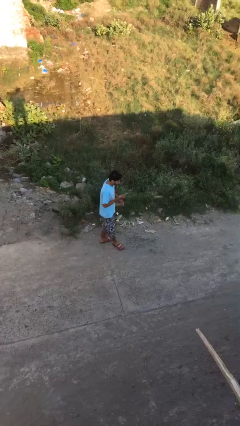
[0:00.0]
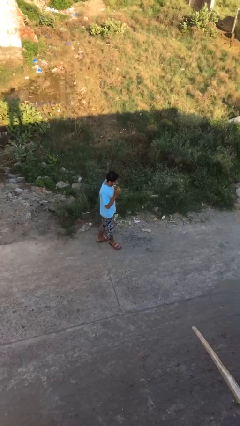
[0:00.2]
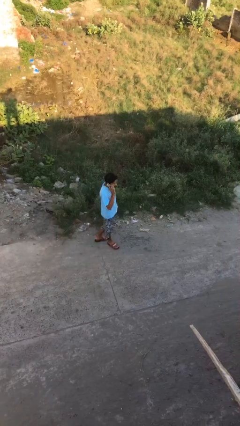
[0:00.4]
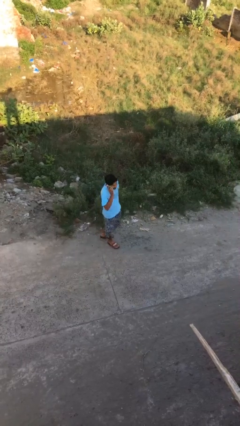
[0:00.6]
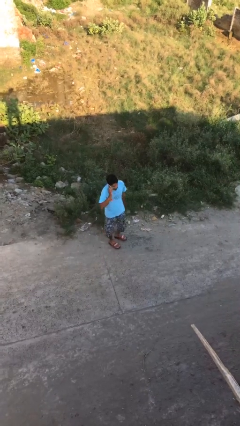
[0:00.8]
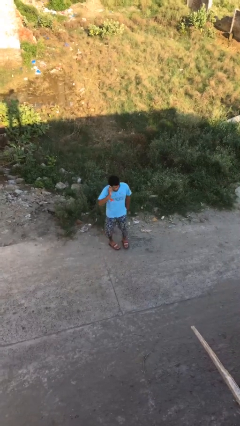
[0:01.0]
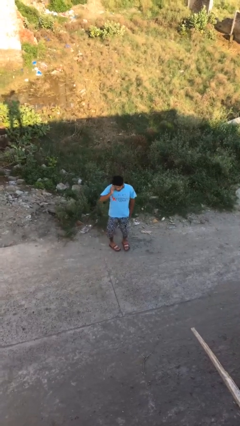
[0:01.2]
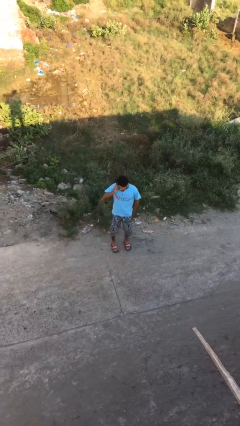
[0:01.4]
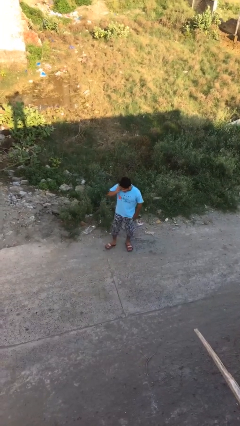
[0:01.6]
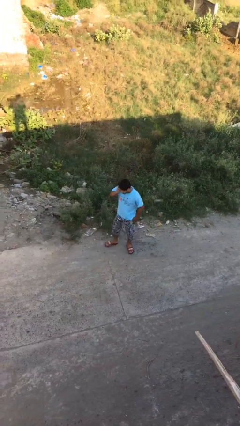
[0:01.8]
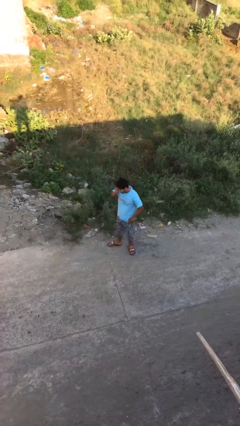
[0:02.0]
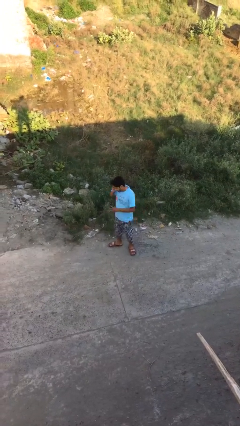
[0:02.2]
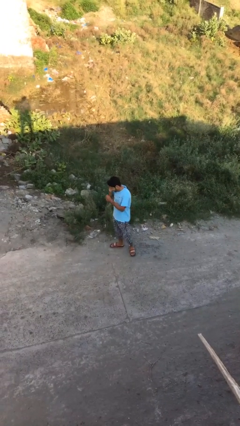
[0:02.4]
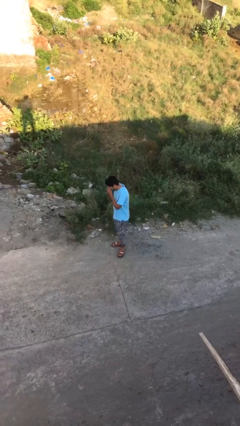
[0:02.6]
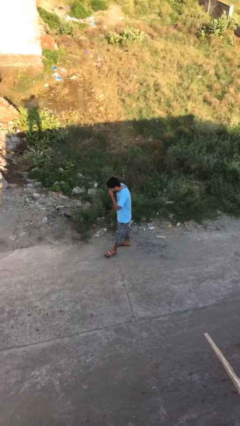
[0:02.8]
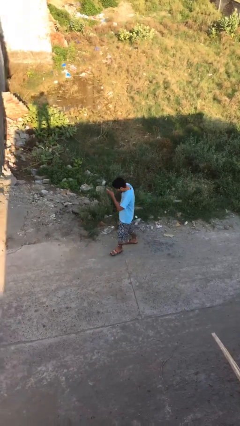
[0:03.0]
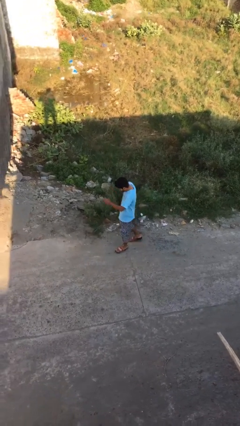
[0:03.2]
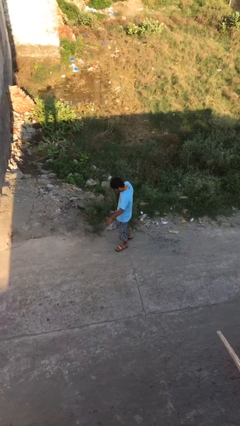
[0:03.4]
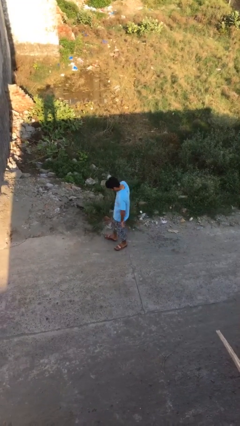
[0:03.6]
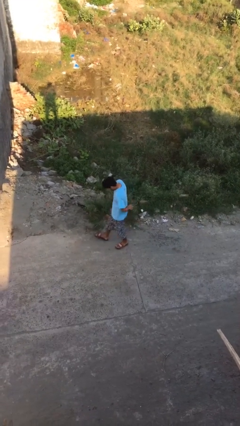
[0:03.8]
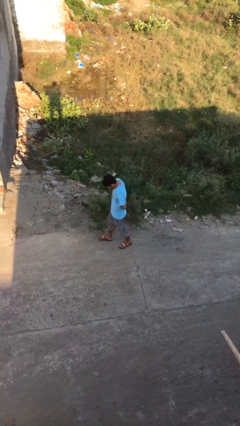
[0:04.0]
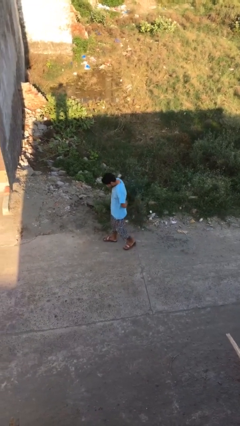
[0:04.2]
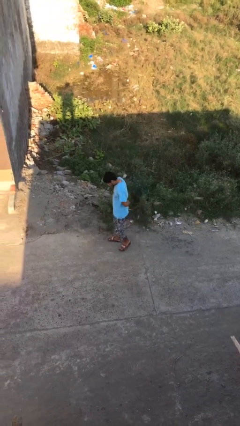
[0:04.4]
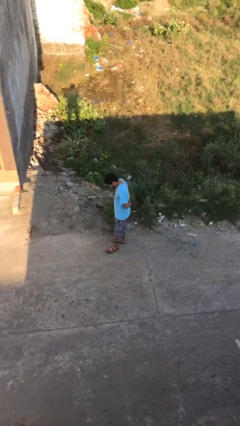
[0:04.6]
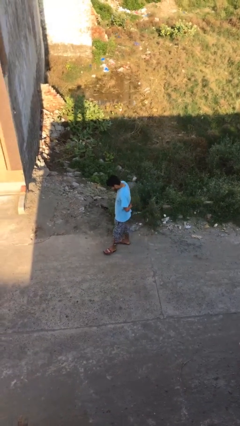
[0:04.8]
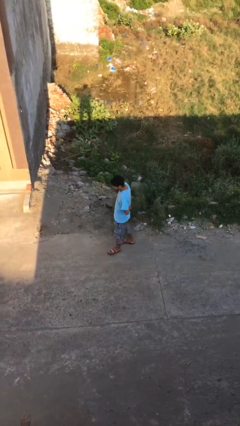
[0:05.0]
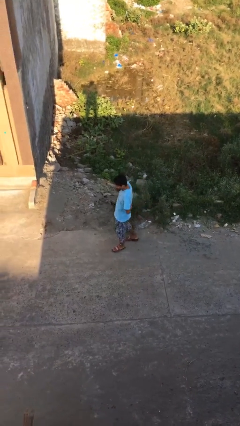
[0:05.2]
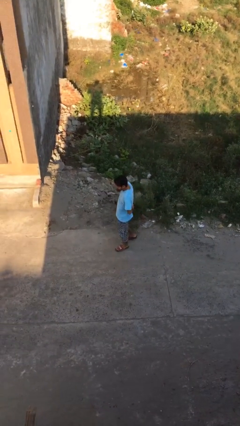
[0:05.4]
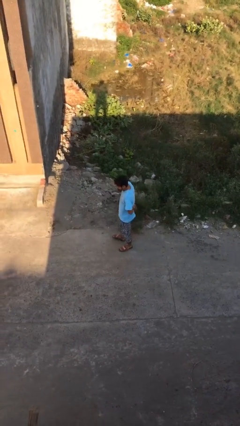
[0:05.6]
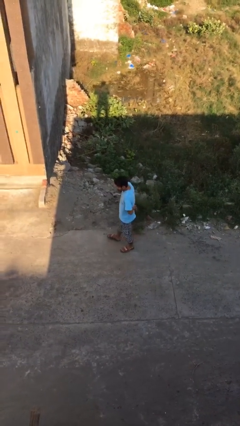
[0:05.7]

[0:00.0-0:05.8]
person talks on phone

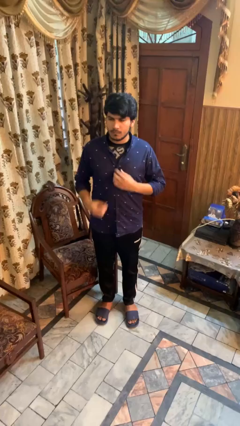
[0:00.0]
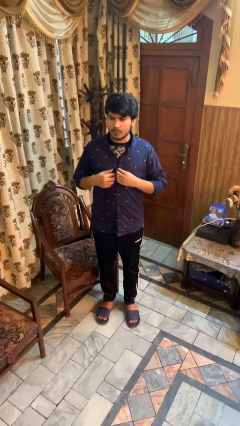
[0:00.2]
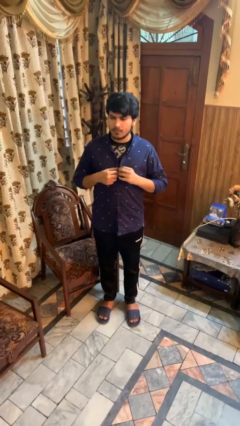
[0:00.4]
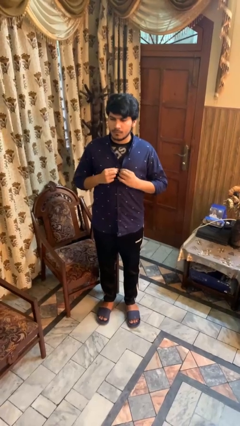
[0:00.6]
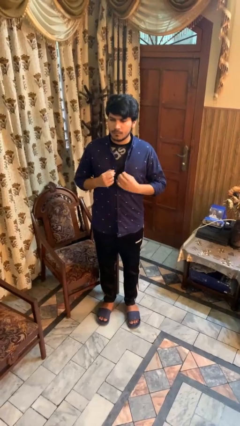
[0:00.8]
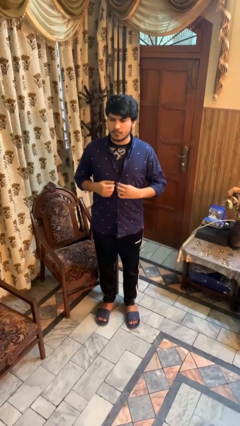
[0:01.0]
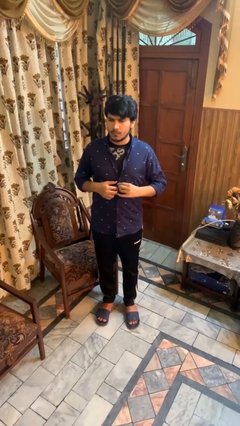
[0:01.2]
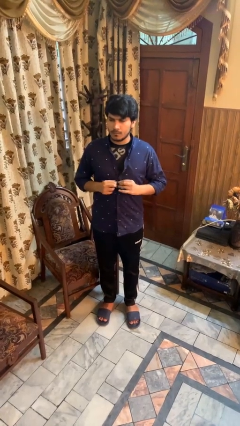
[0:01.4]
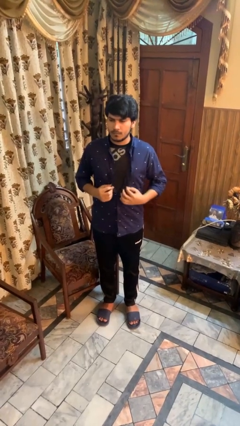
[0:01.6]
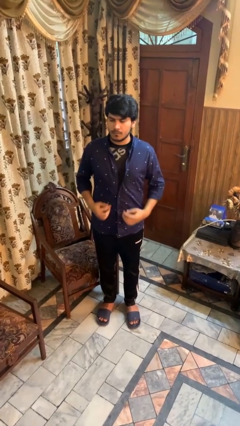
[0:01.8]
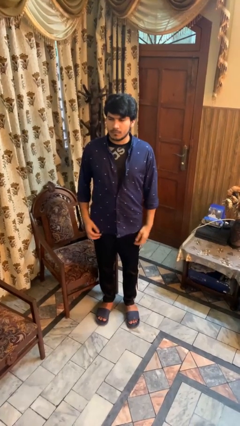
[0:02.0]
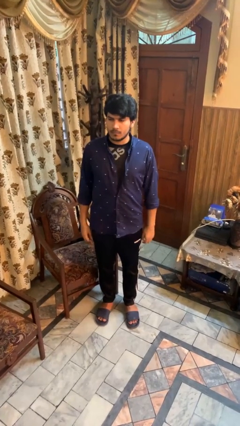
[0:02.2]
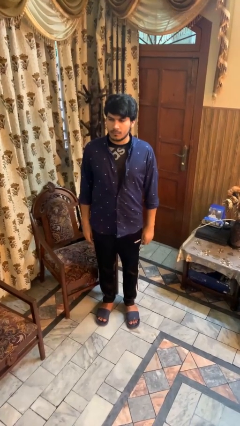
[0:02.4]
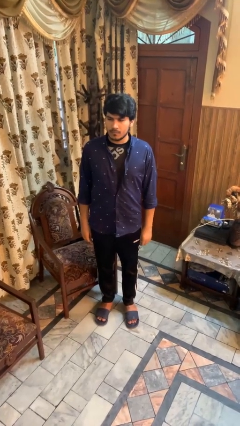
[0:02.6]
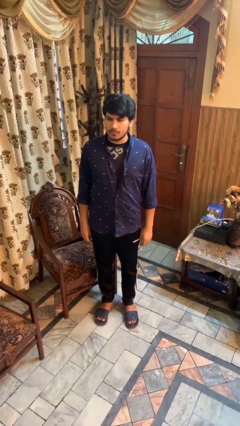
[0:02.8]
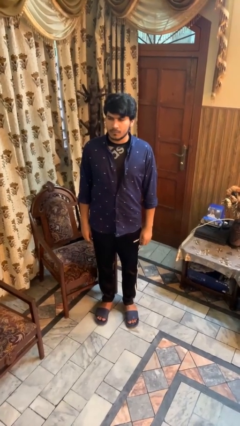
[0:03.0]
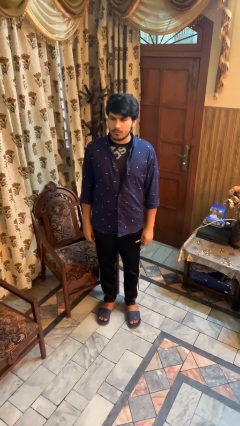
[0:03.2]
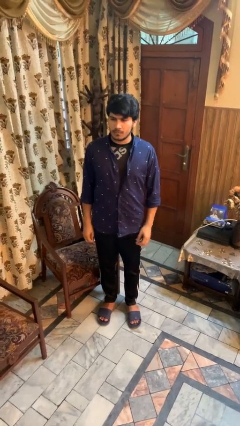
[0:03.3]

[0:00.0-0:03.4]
person unbuttons shirt

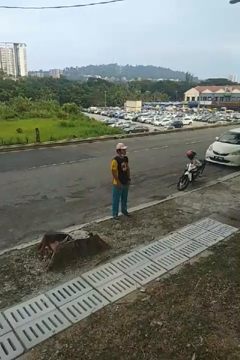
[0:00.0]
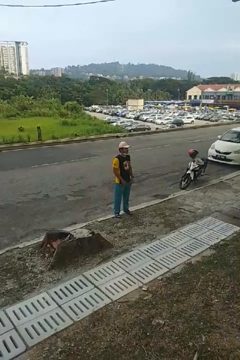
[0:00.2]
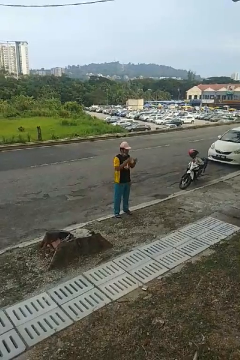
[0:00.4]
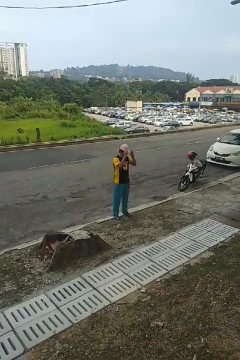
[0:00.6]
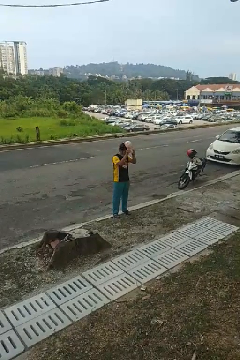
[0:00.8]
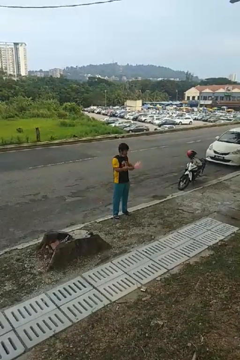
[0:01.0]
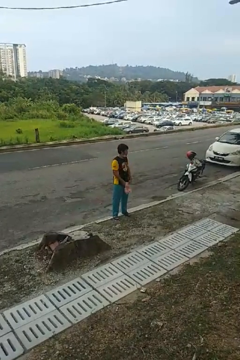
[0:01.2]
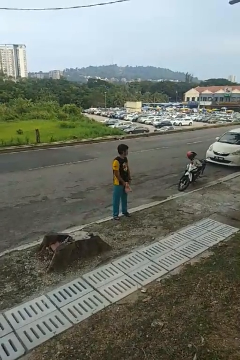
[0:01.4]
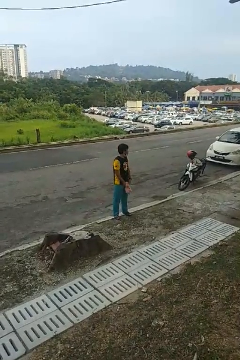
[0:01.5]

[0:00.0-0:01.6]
person takes off hat

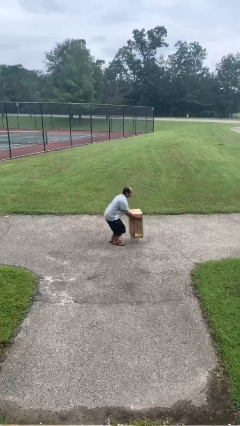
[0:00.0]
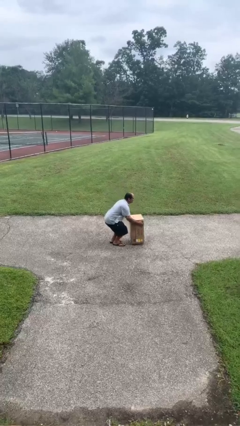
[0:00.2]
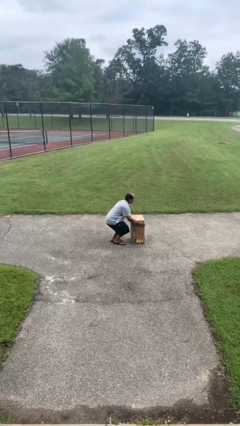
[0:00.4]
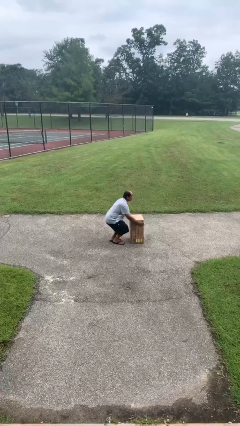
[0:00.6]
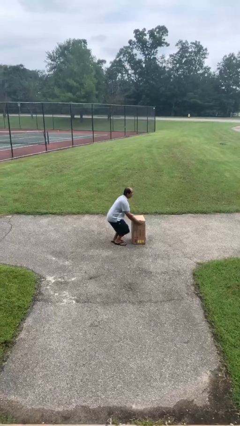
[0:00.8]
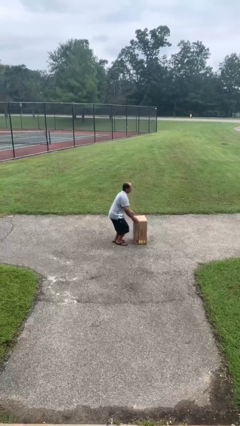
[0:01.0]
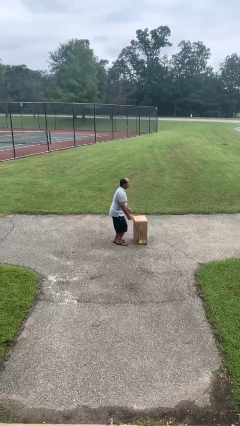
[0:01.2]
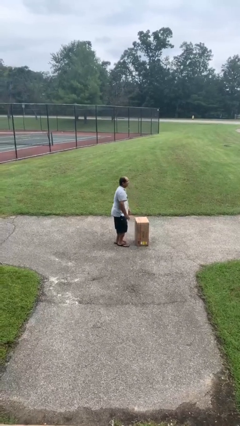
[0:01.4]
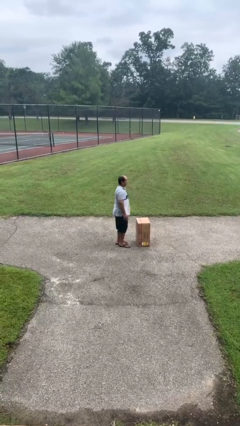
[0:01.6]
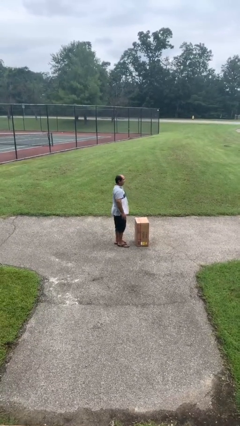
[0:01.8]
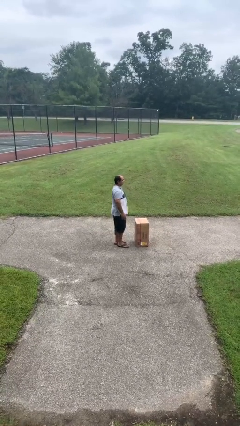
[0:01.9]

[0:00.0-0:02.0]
person puts down object on floor

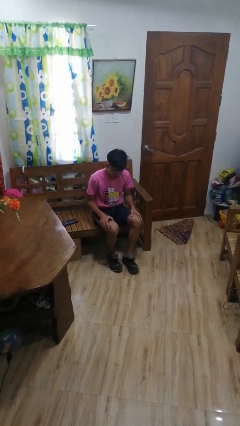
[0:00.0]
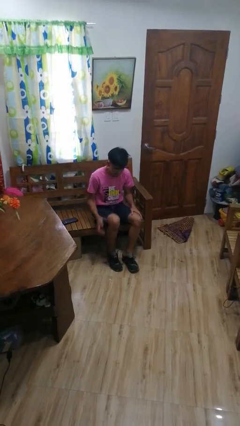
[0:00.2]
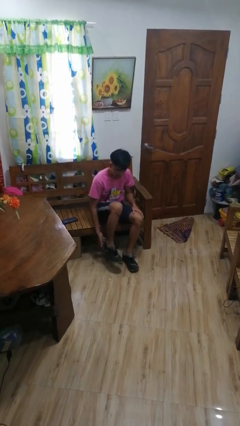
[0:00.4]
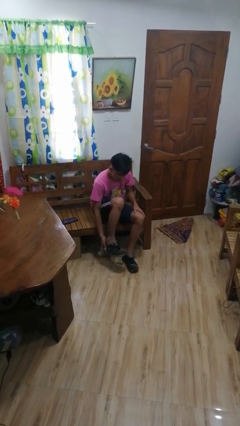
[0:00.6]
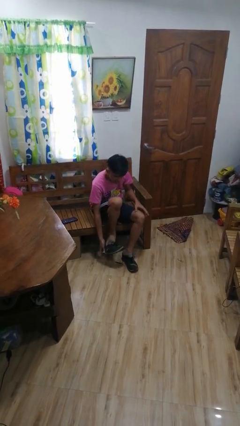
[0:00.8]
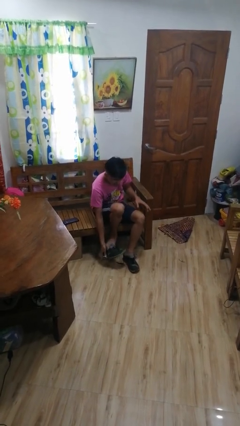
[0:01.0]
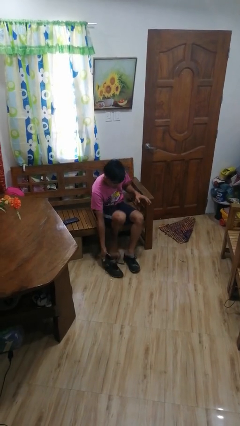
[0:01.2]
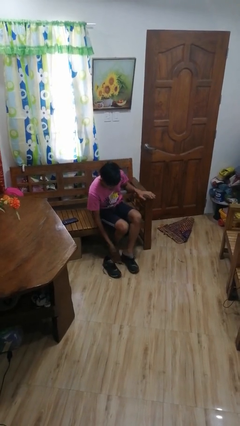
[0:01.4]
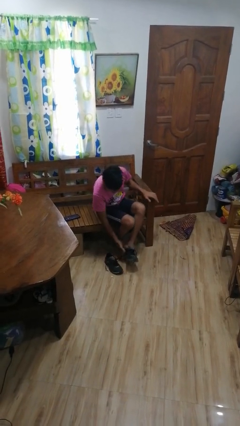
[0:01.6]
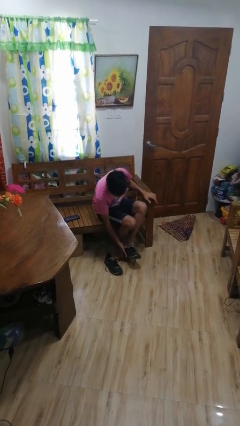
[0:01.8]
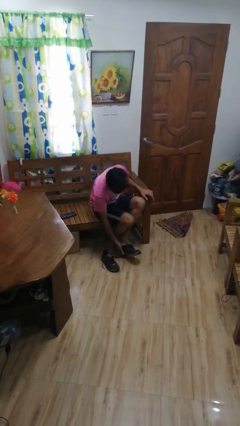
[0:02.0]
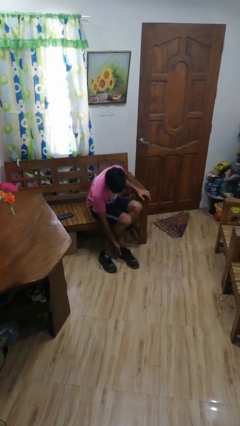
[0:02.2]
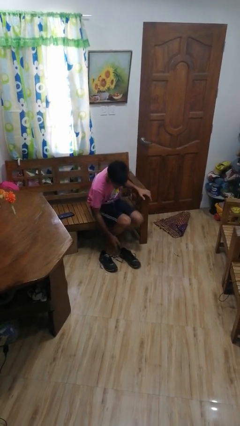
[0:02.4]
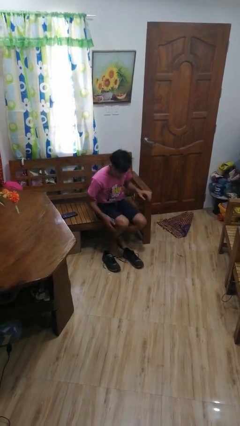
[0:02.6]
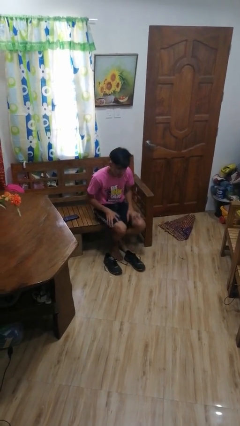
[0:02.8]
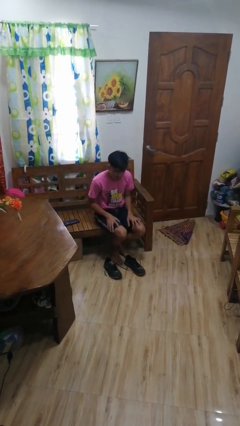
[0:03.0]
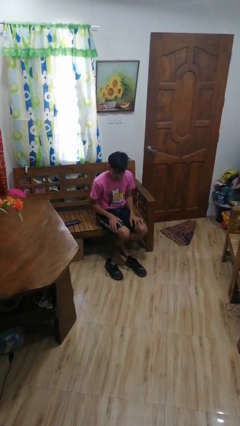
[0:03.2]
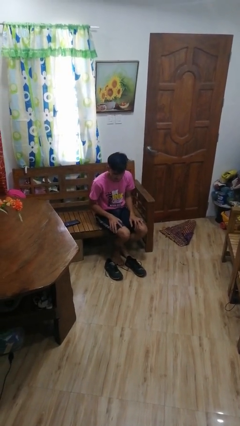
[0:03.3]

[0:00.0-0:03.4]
person takes off shoes

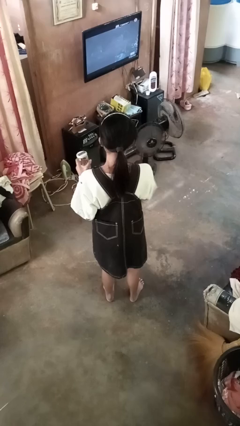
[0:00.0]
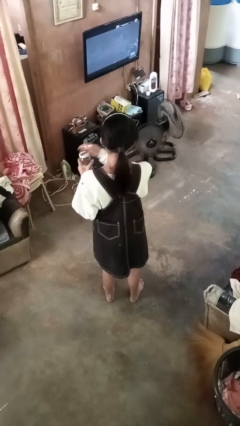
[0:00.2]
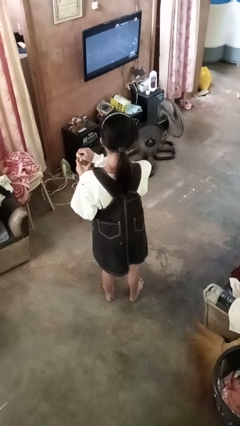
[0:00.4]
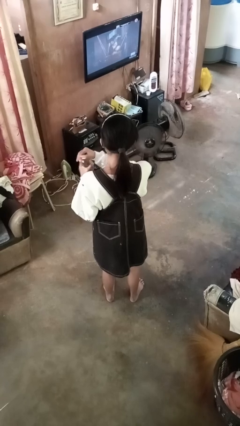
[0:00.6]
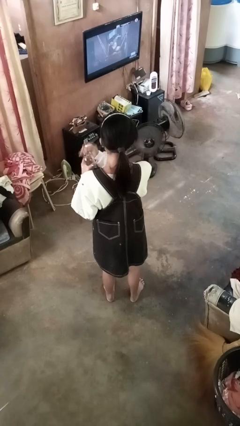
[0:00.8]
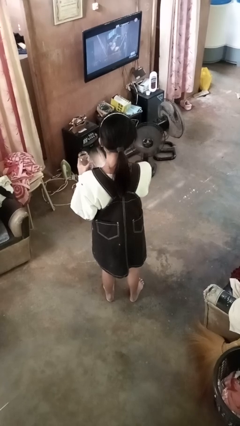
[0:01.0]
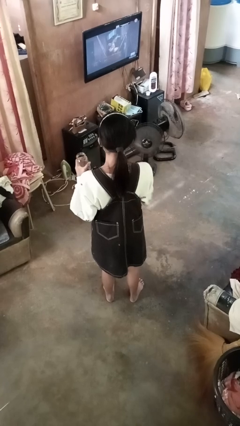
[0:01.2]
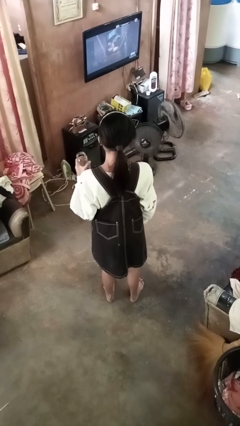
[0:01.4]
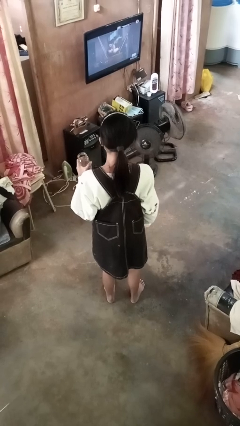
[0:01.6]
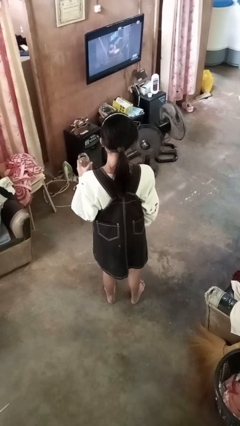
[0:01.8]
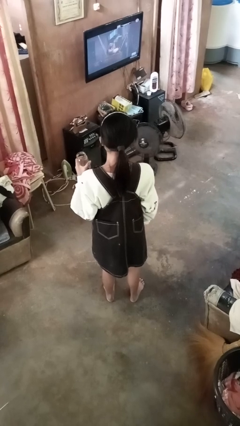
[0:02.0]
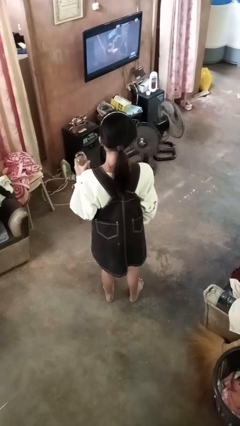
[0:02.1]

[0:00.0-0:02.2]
person opens jar
